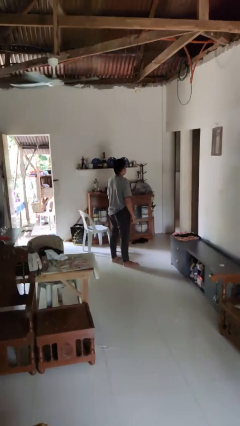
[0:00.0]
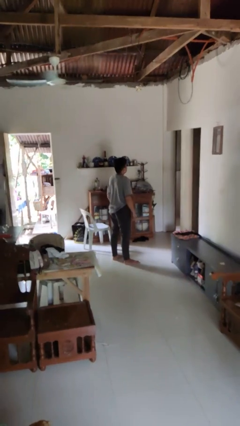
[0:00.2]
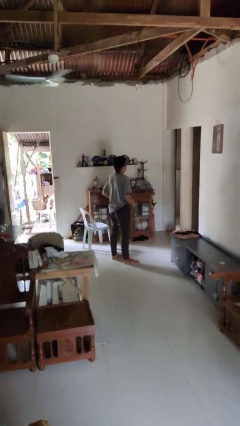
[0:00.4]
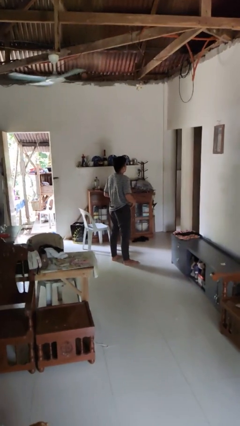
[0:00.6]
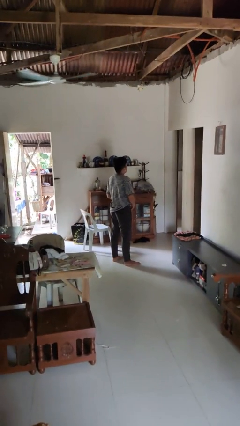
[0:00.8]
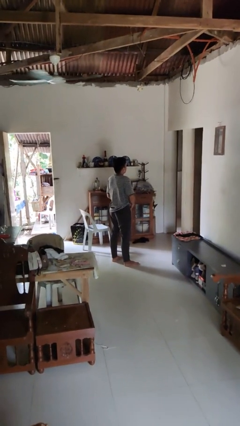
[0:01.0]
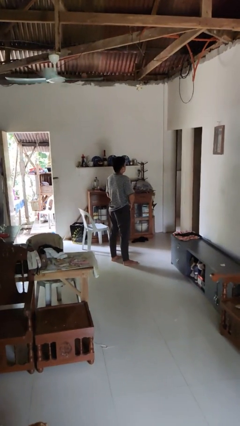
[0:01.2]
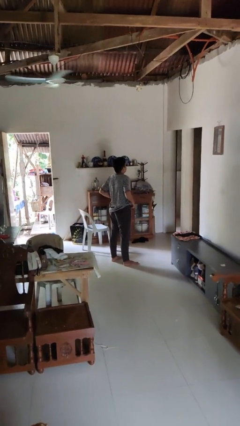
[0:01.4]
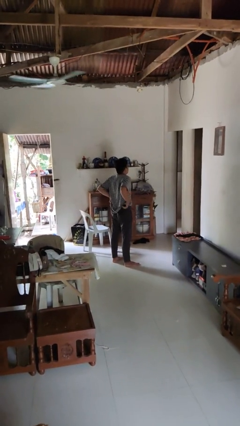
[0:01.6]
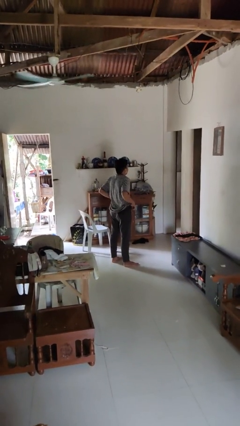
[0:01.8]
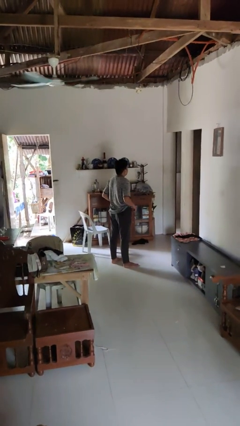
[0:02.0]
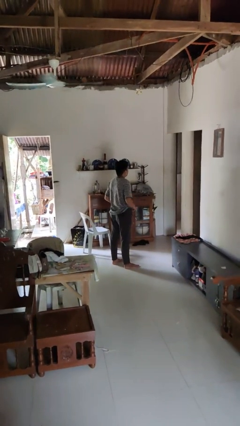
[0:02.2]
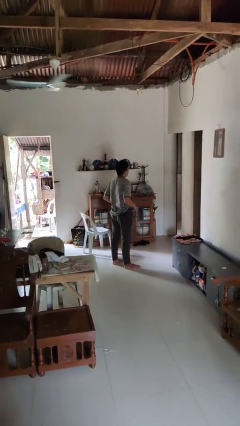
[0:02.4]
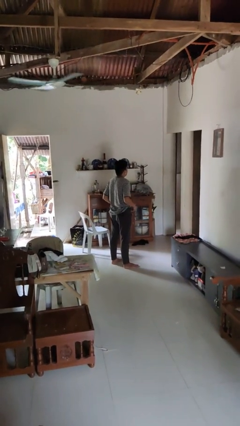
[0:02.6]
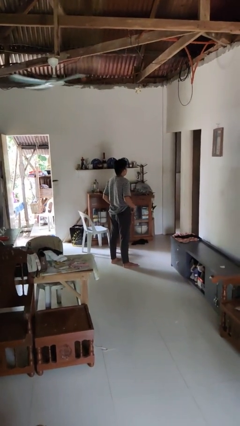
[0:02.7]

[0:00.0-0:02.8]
person hikes up pants

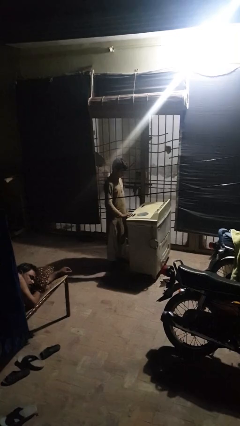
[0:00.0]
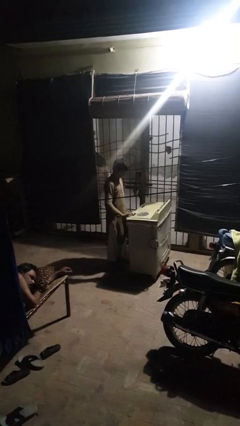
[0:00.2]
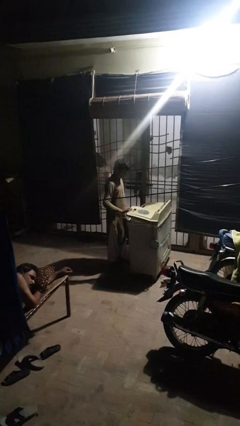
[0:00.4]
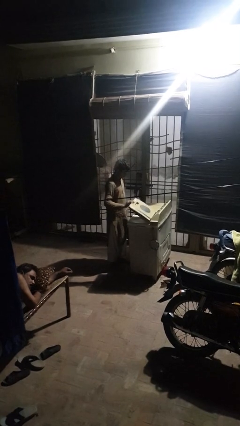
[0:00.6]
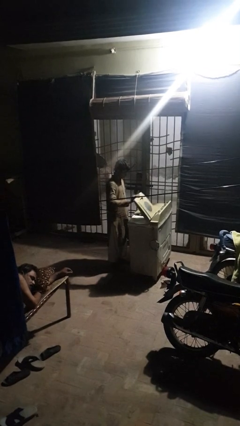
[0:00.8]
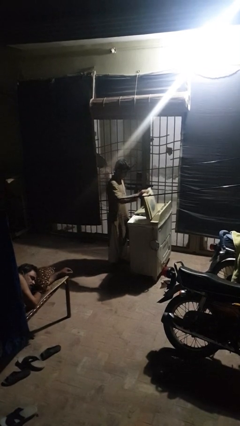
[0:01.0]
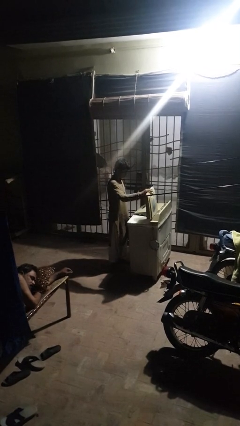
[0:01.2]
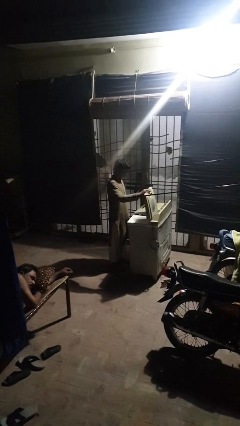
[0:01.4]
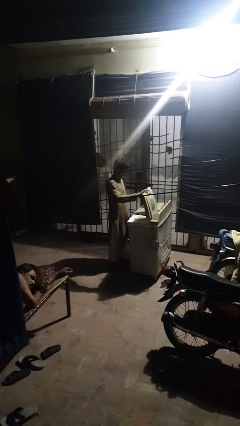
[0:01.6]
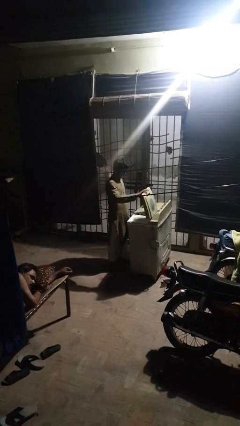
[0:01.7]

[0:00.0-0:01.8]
person opens clothes washer

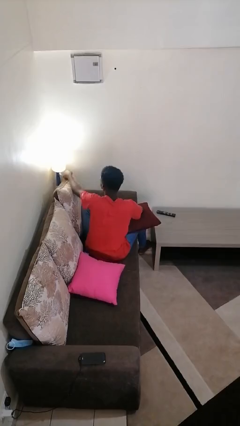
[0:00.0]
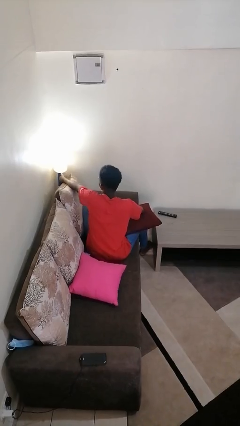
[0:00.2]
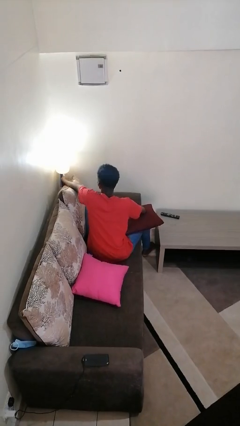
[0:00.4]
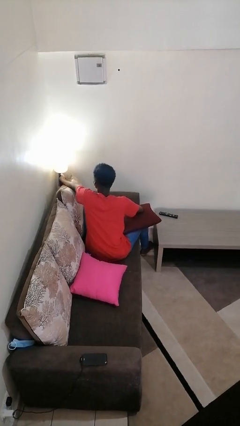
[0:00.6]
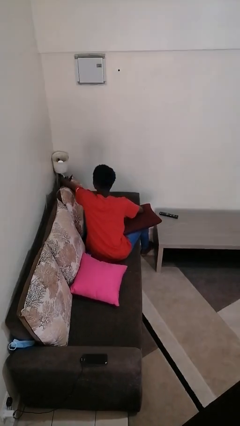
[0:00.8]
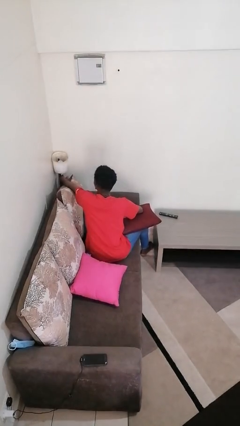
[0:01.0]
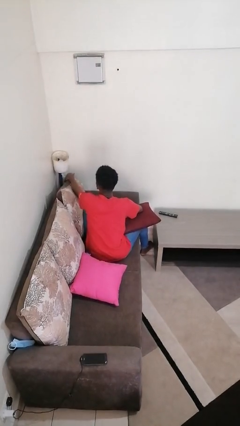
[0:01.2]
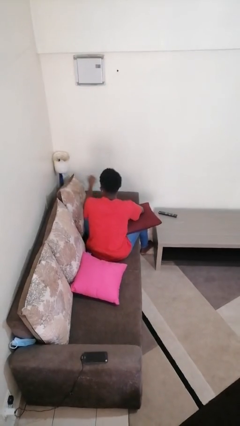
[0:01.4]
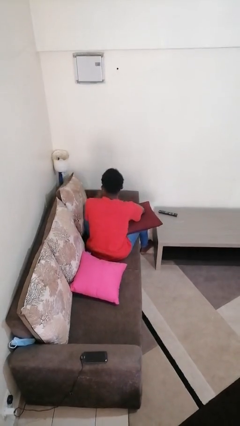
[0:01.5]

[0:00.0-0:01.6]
person turns off lamp

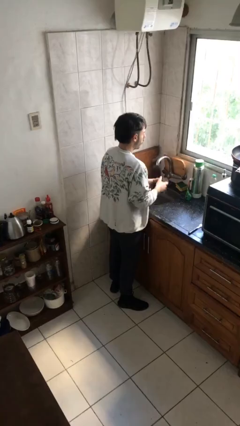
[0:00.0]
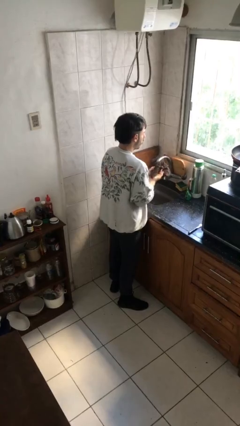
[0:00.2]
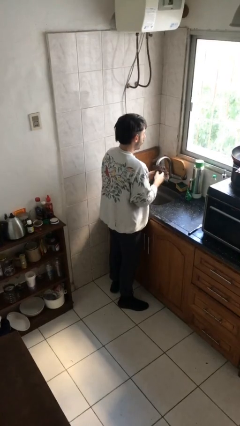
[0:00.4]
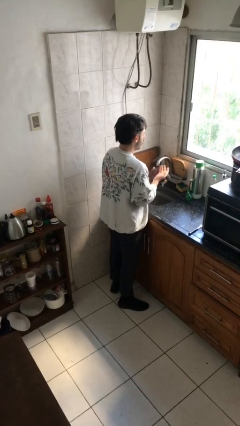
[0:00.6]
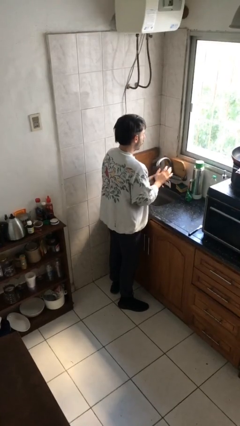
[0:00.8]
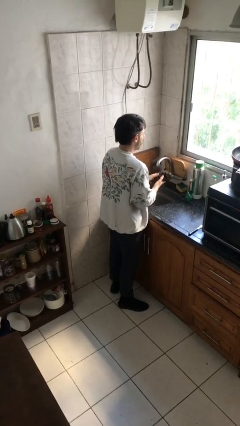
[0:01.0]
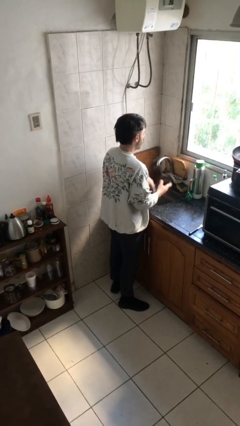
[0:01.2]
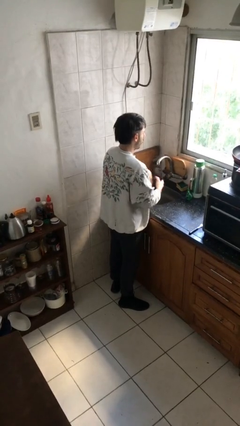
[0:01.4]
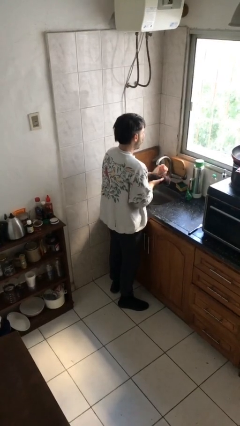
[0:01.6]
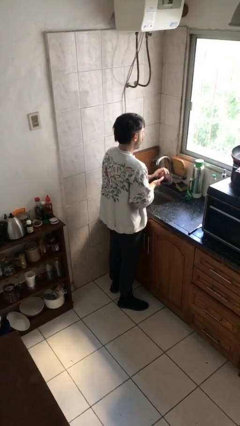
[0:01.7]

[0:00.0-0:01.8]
person dries hands with towel

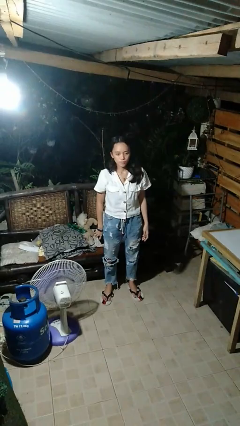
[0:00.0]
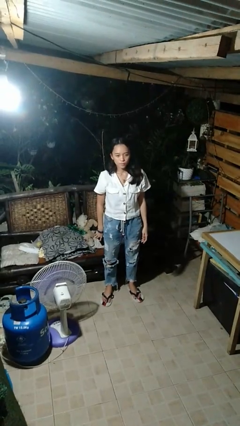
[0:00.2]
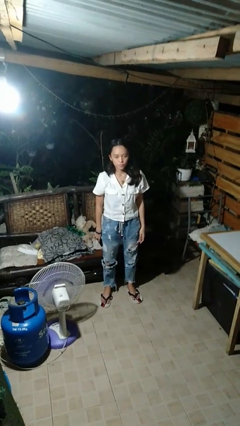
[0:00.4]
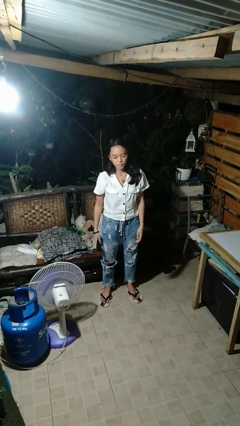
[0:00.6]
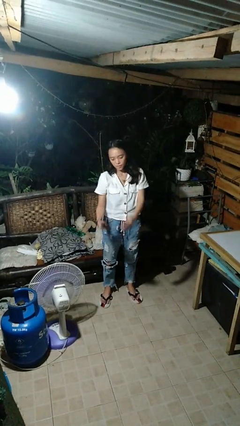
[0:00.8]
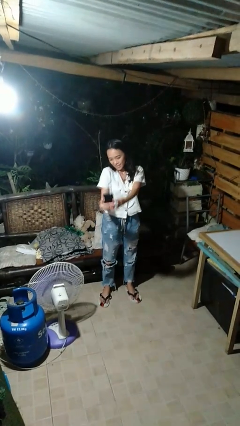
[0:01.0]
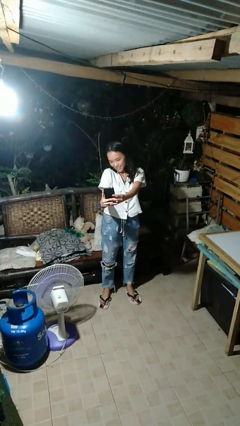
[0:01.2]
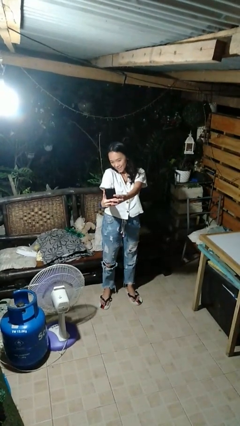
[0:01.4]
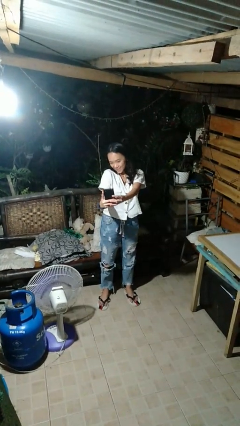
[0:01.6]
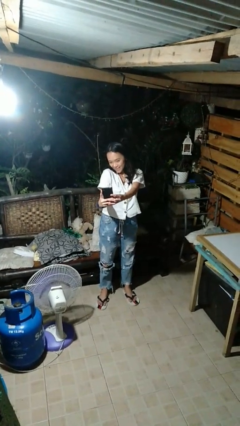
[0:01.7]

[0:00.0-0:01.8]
person takes selfie

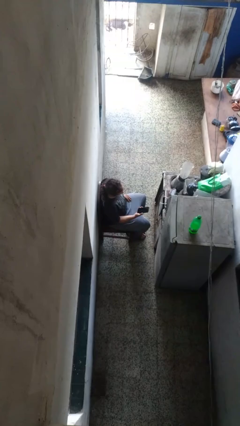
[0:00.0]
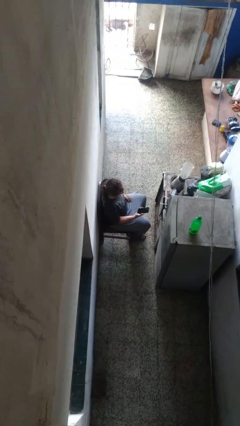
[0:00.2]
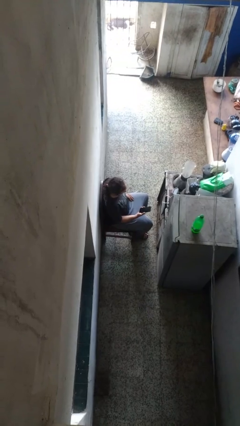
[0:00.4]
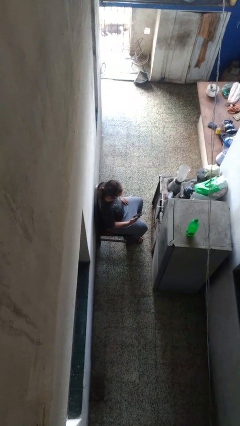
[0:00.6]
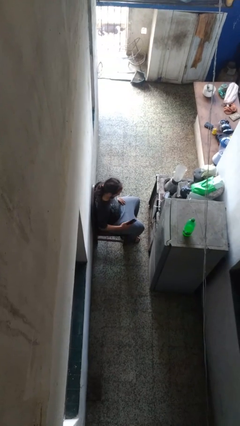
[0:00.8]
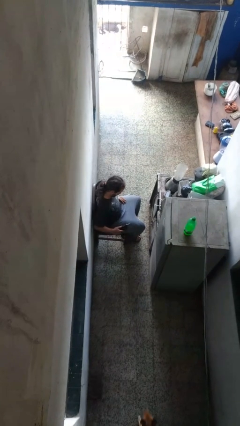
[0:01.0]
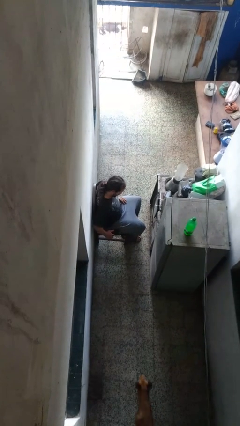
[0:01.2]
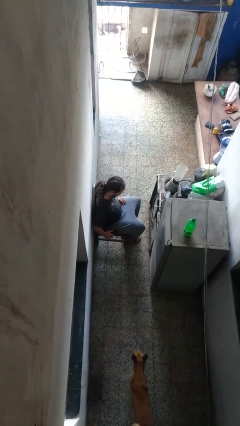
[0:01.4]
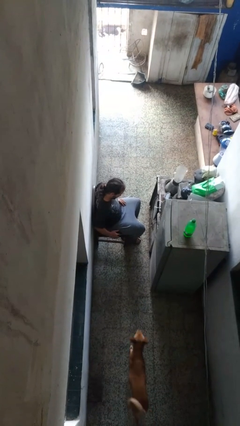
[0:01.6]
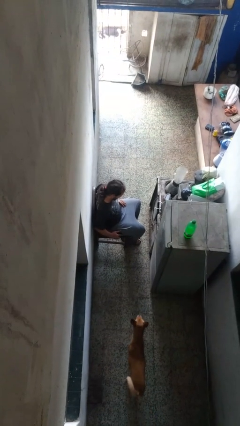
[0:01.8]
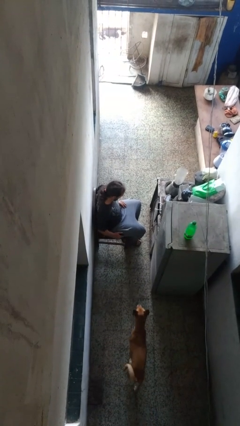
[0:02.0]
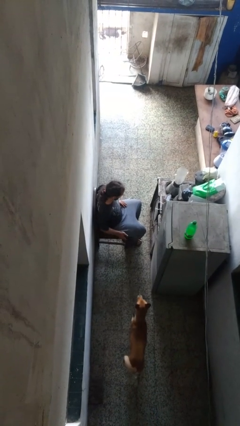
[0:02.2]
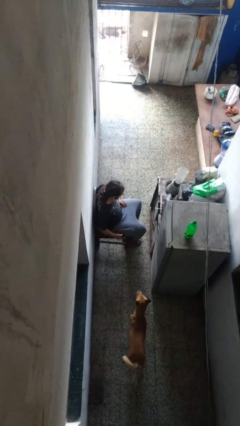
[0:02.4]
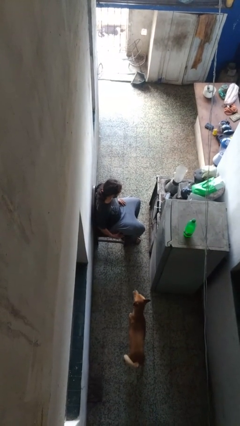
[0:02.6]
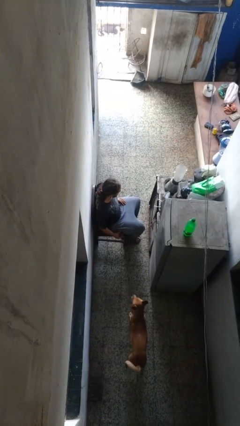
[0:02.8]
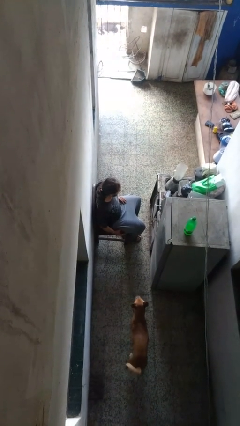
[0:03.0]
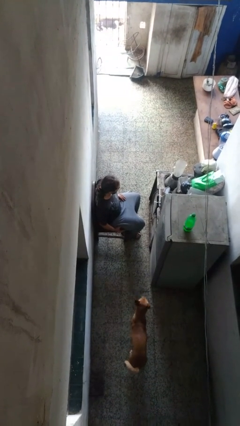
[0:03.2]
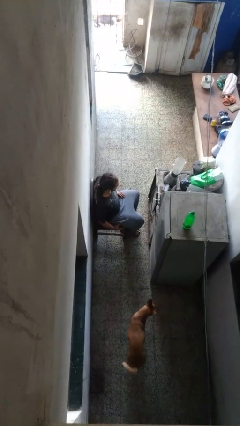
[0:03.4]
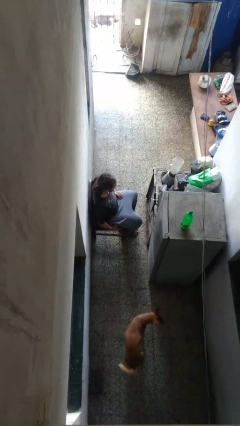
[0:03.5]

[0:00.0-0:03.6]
person puts phone into pocket

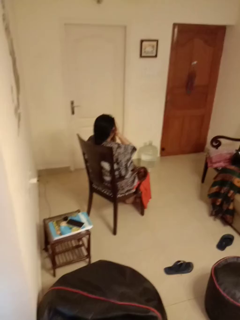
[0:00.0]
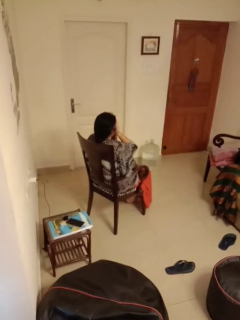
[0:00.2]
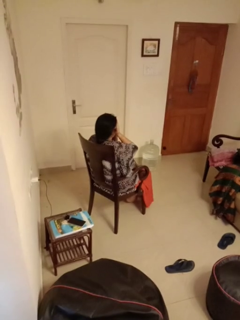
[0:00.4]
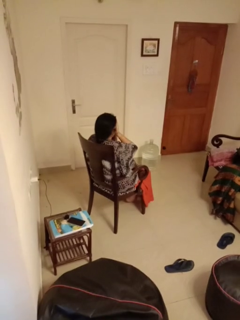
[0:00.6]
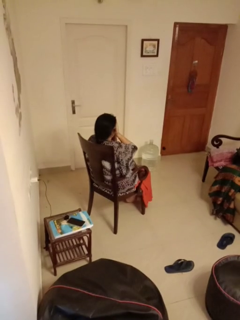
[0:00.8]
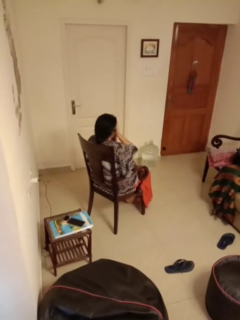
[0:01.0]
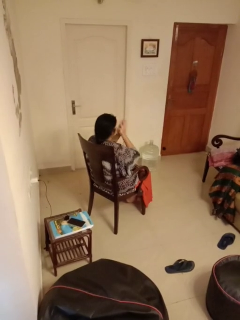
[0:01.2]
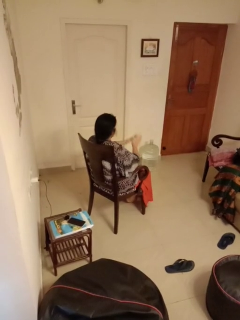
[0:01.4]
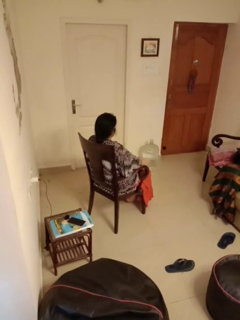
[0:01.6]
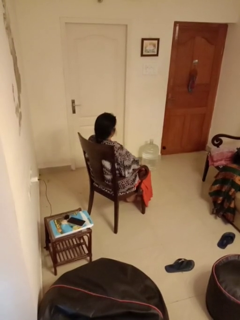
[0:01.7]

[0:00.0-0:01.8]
person covers face with hands

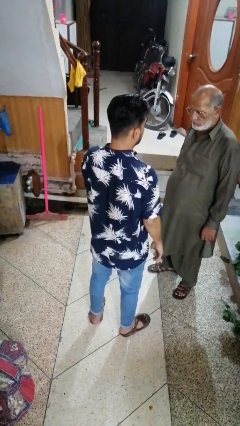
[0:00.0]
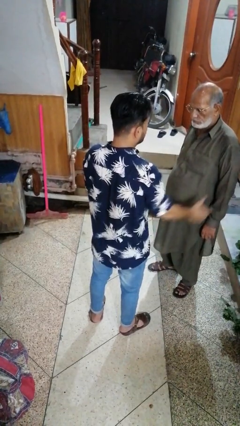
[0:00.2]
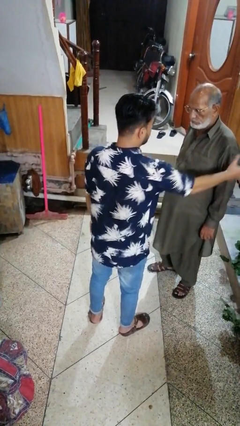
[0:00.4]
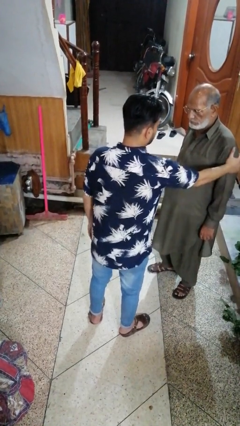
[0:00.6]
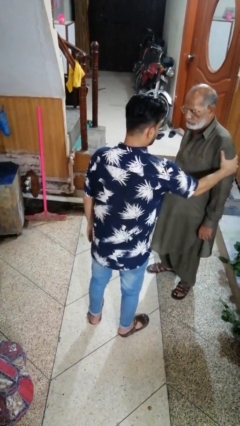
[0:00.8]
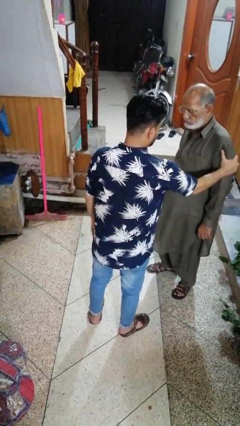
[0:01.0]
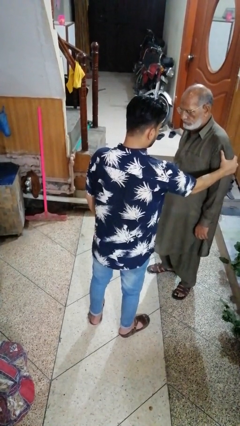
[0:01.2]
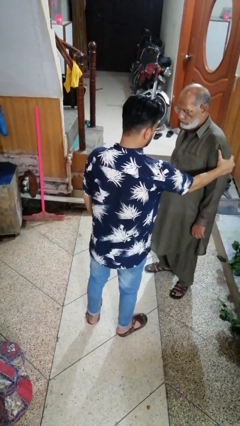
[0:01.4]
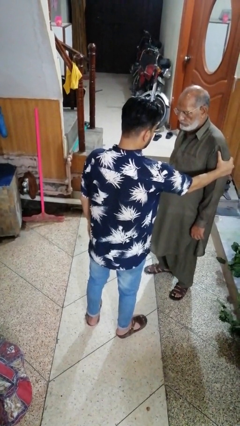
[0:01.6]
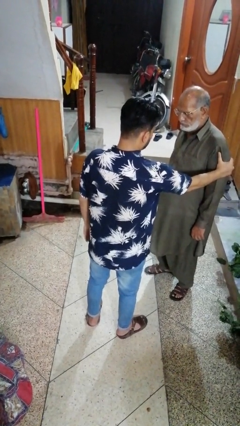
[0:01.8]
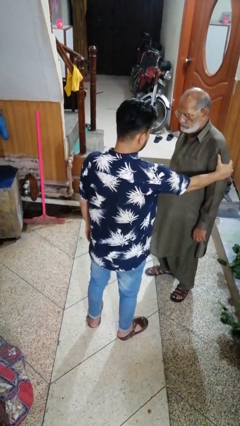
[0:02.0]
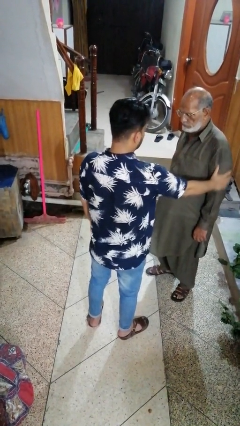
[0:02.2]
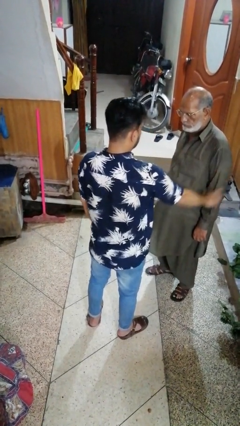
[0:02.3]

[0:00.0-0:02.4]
person grabs person by bicep

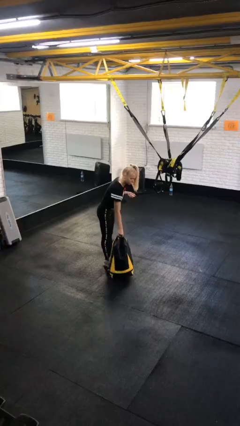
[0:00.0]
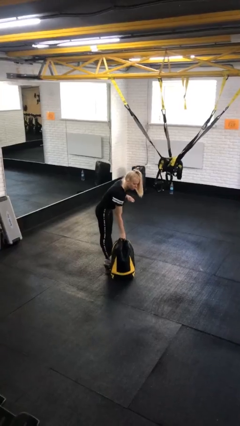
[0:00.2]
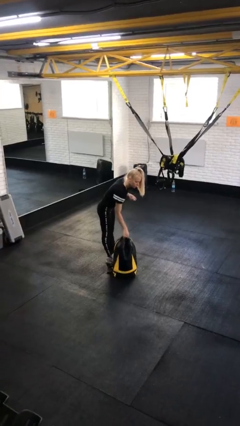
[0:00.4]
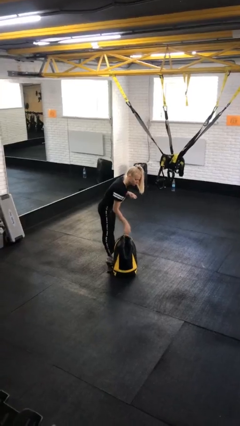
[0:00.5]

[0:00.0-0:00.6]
person puts down object on floor
